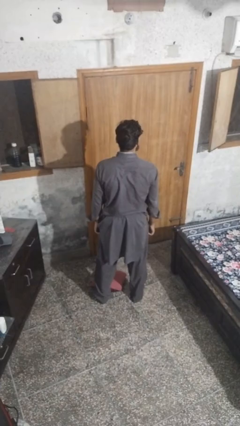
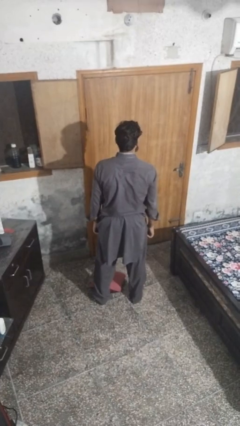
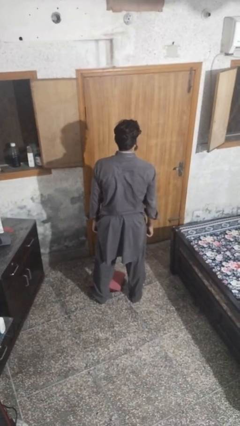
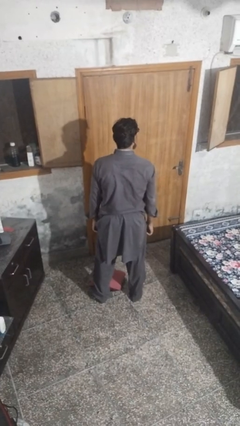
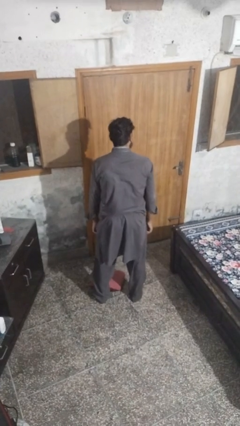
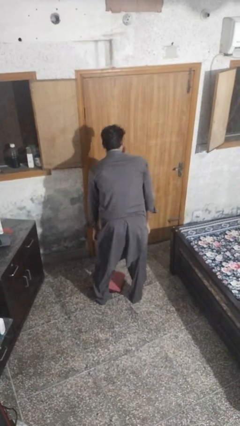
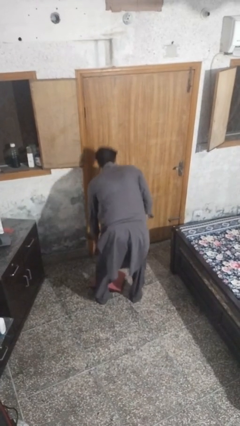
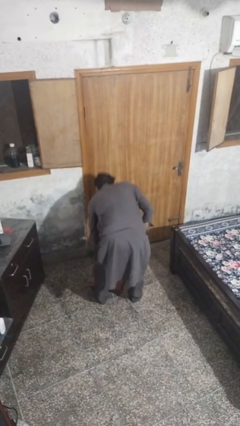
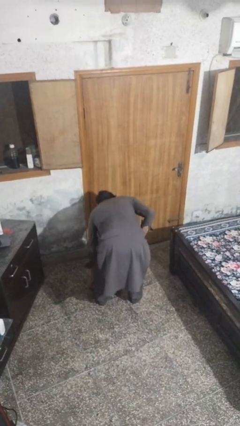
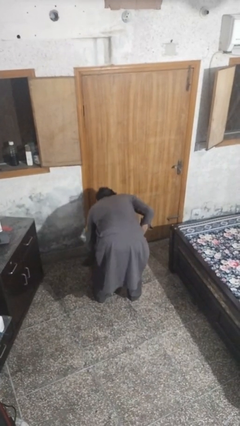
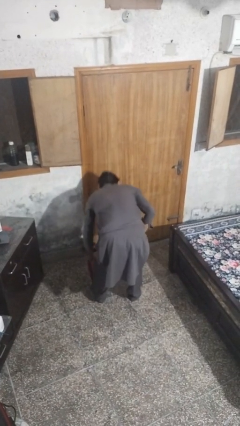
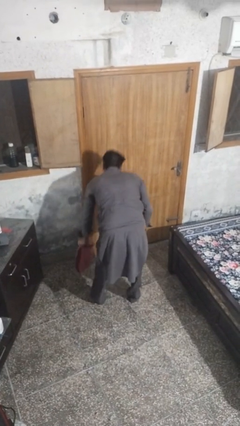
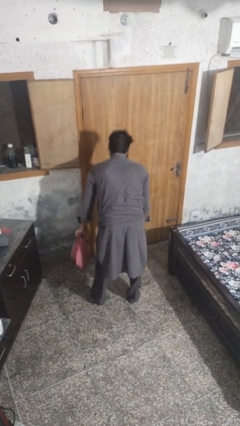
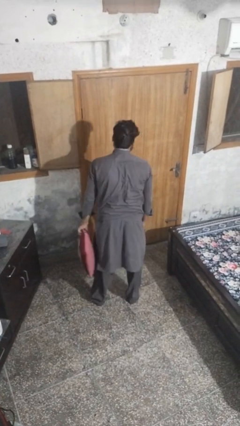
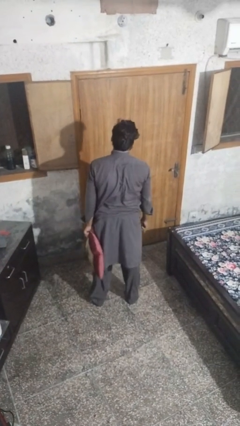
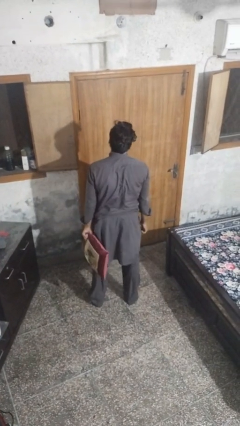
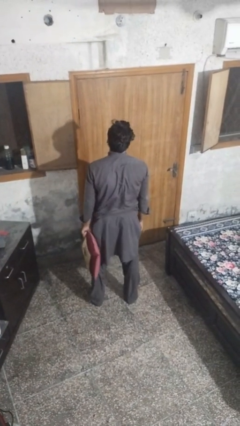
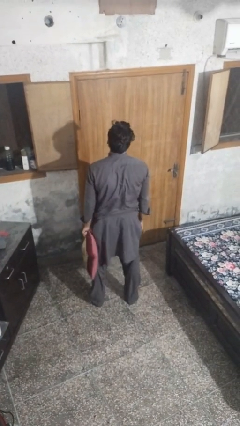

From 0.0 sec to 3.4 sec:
person picks up object from floor

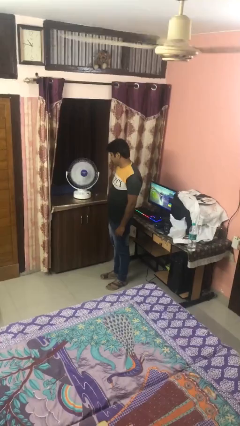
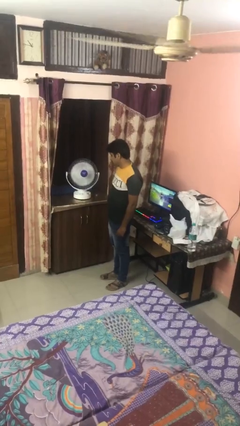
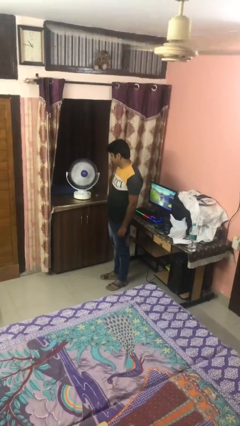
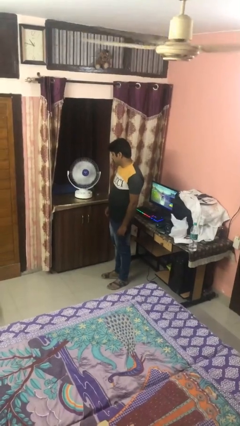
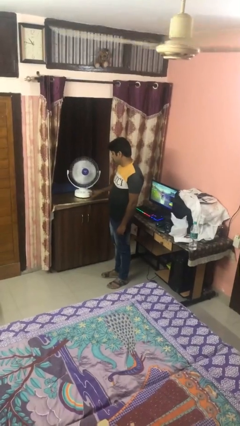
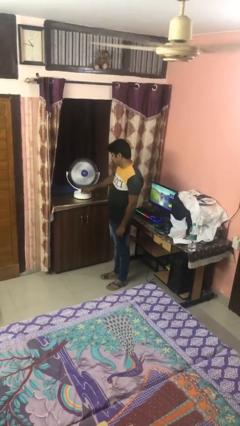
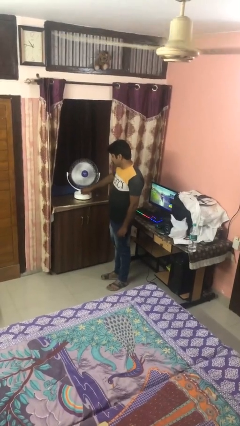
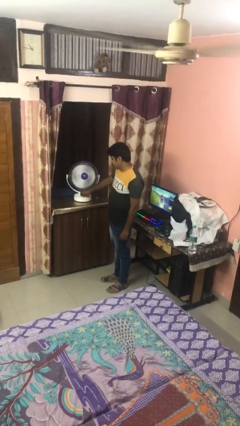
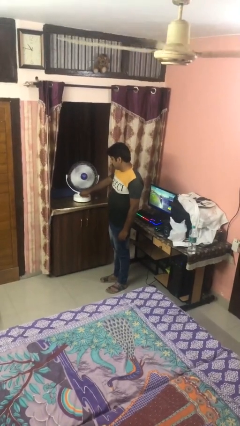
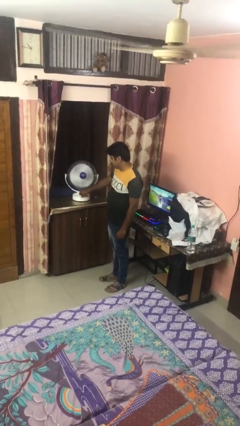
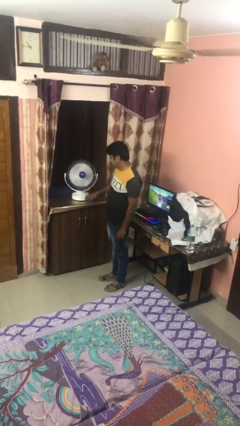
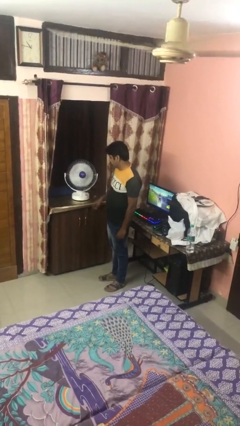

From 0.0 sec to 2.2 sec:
person turns on fan

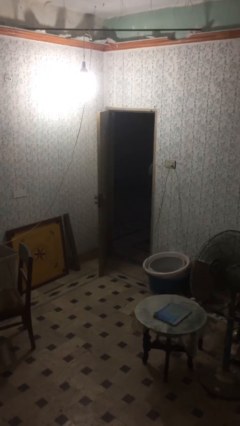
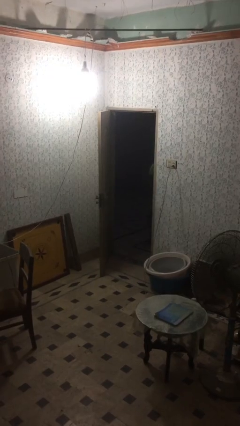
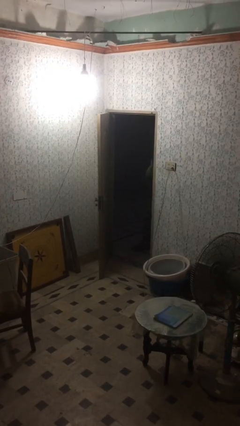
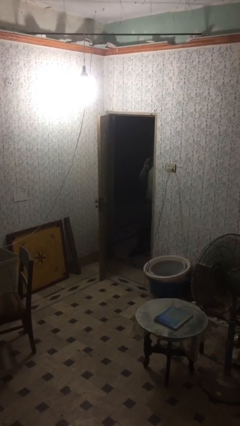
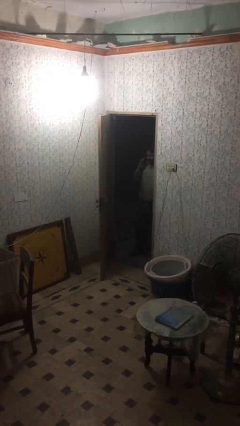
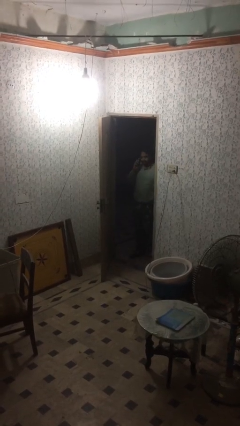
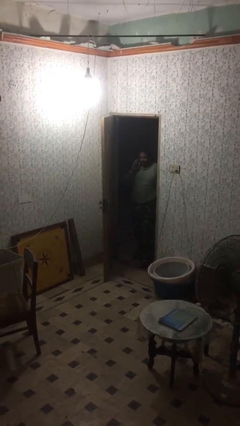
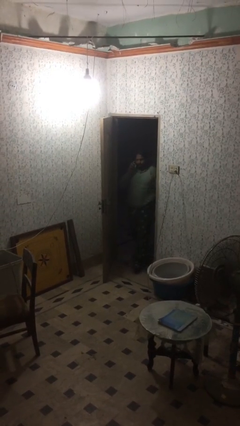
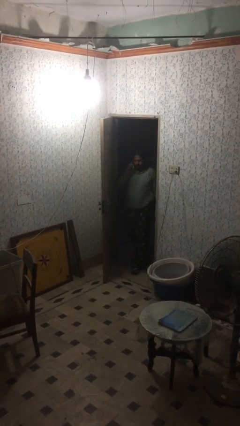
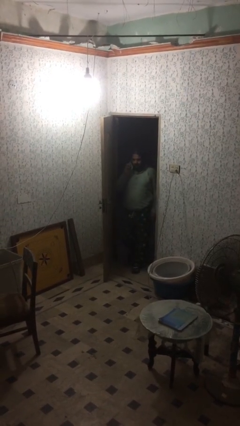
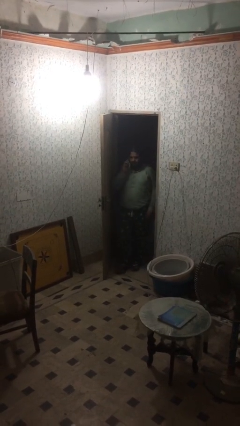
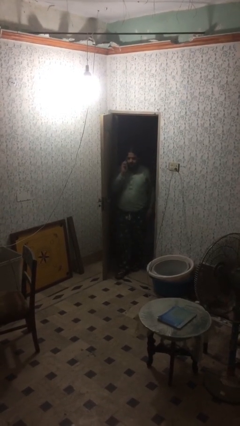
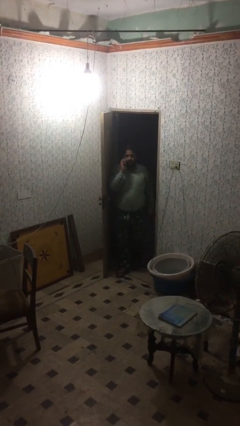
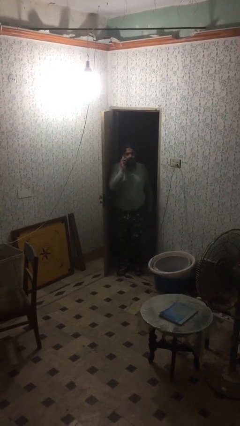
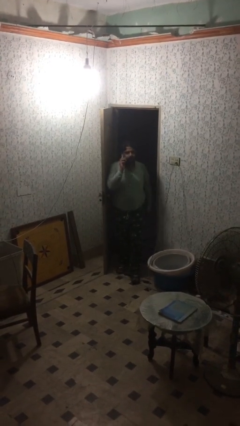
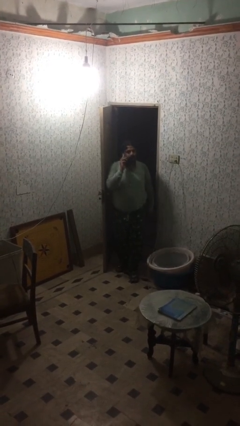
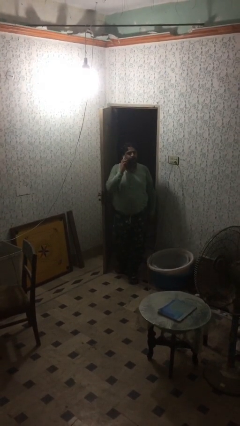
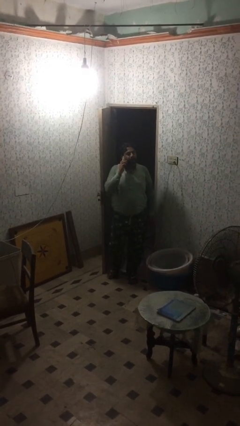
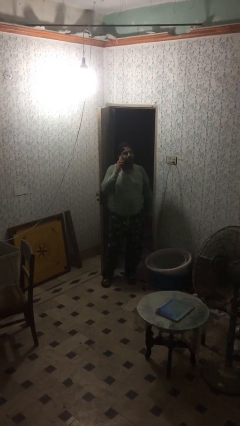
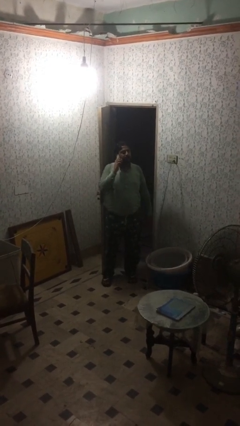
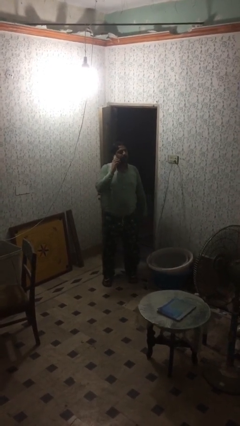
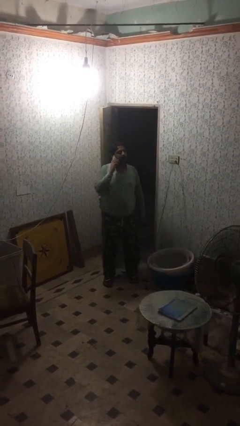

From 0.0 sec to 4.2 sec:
person enters scene through structure

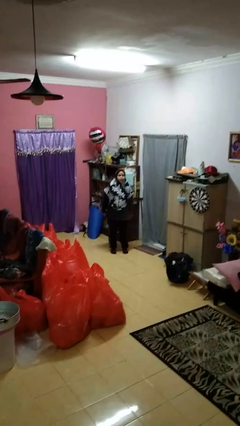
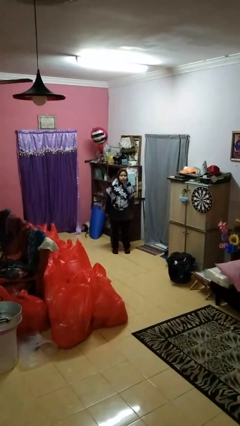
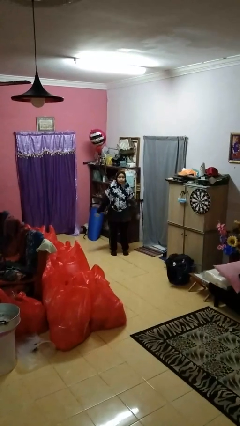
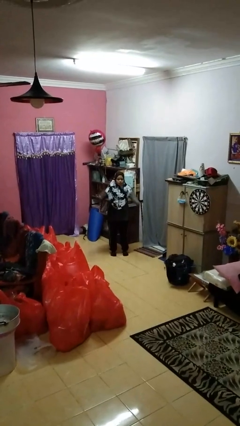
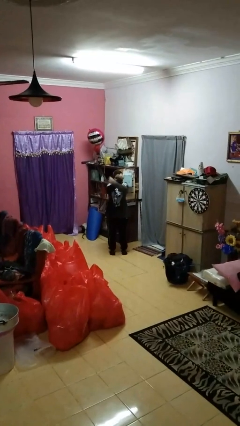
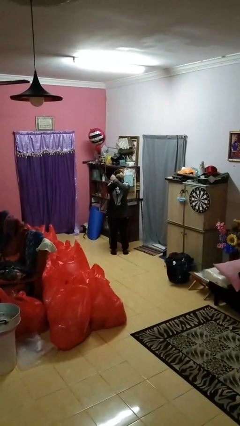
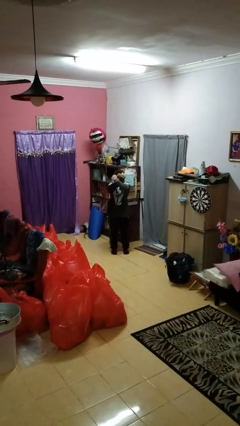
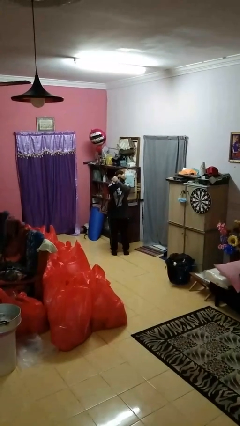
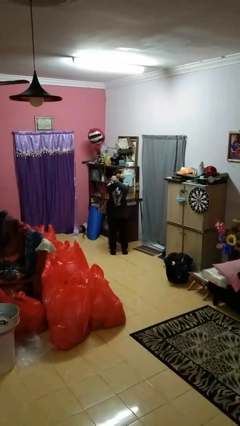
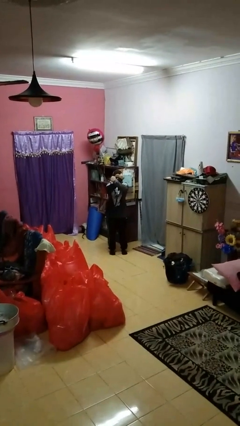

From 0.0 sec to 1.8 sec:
person crosses arms

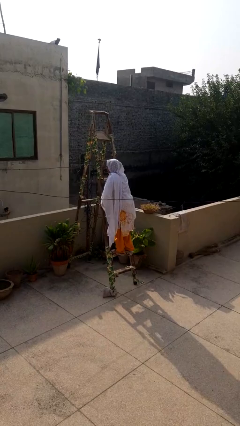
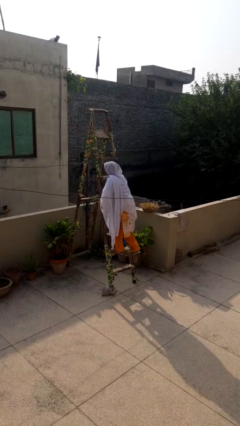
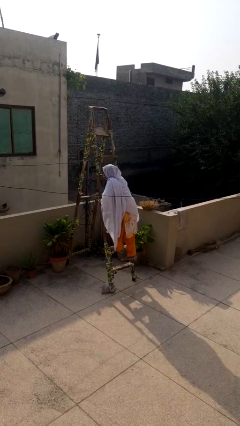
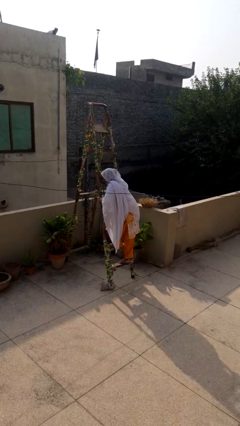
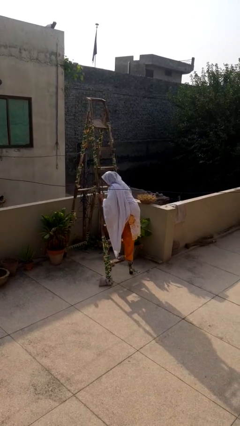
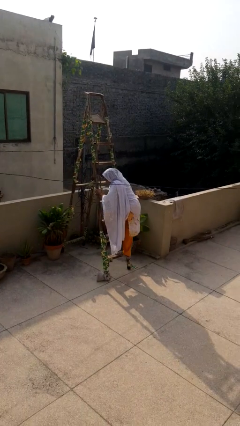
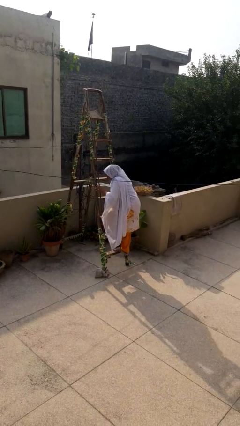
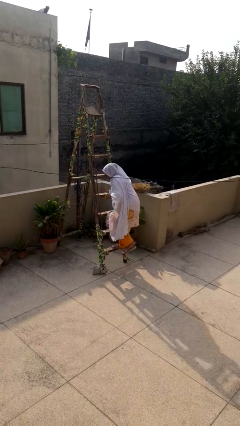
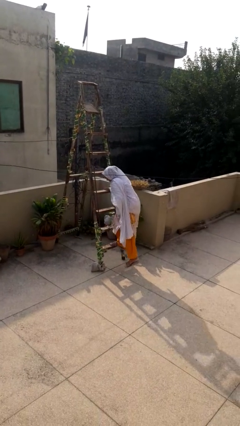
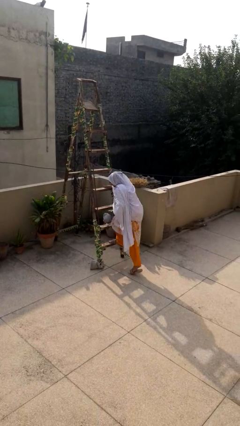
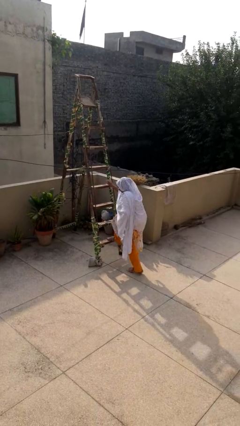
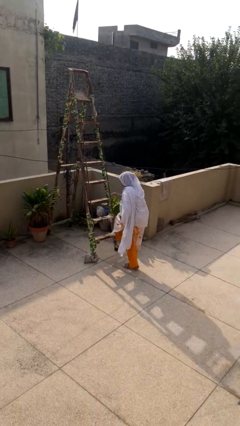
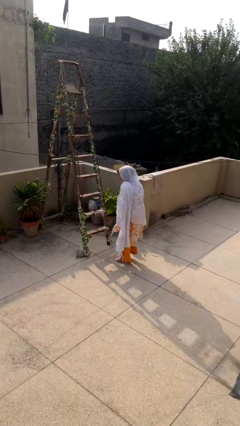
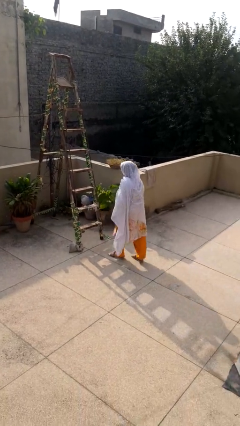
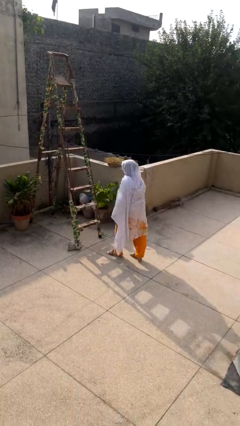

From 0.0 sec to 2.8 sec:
person climbs down ladder

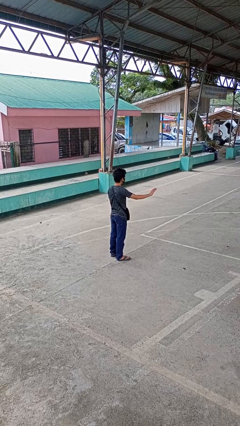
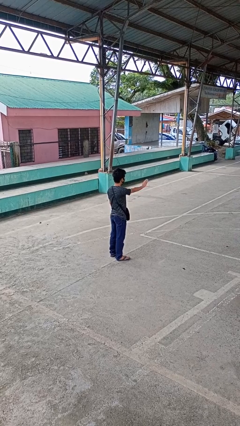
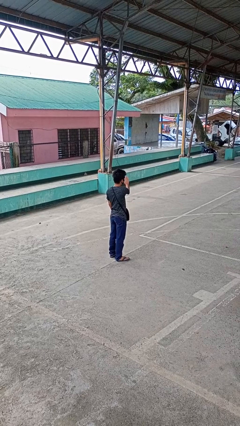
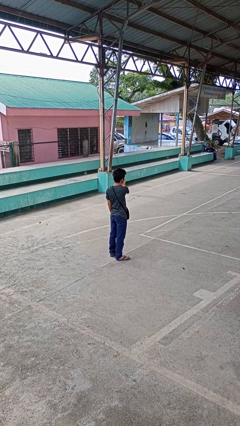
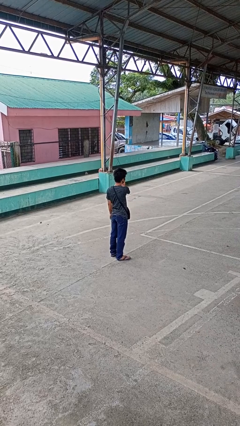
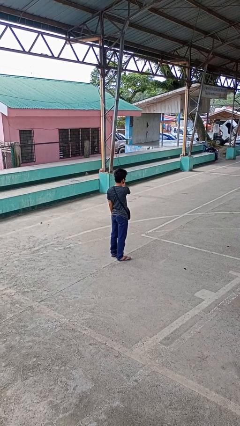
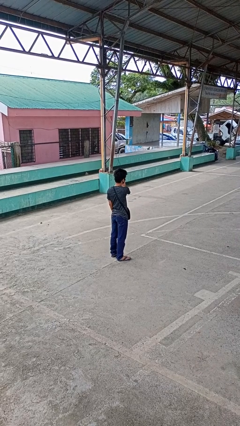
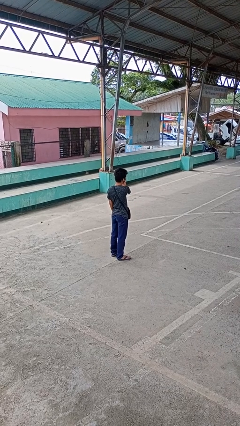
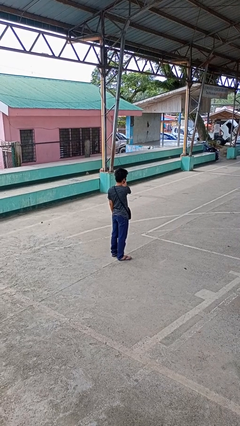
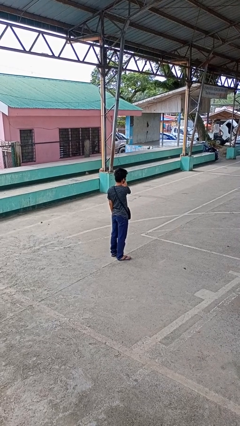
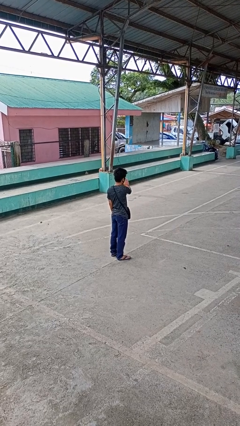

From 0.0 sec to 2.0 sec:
person gestures swipe left

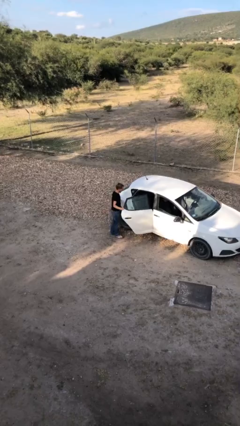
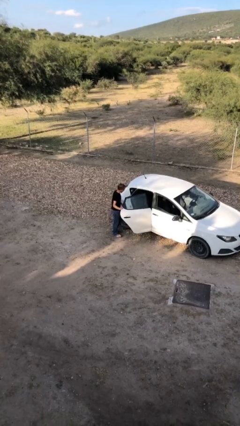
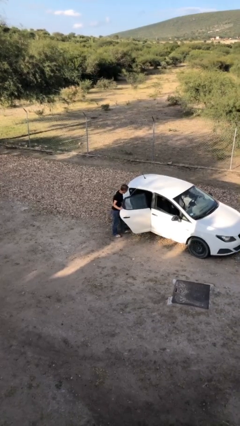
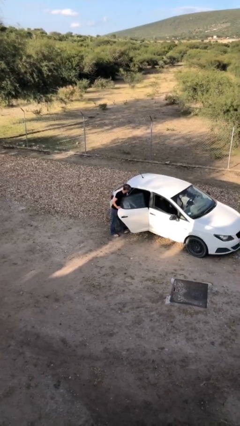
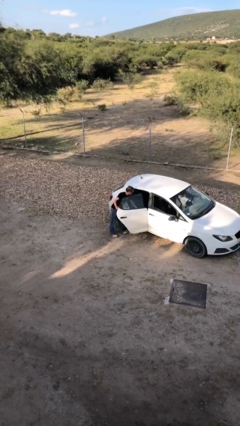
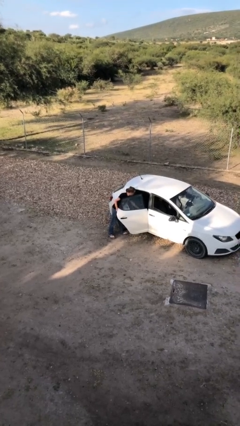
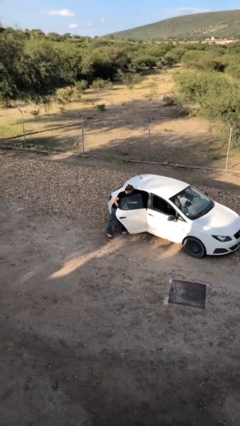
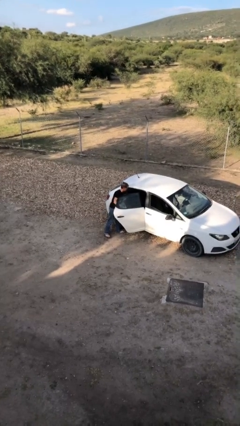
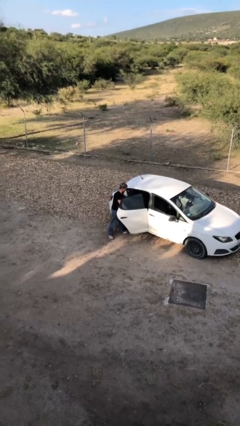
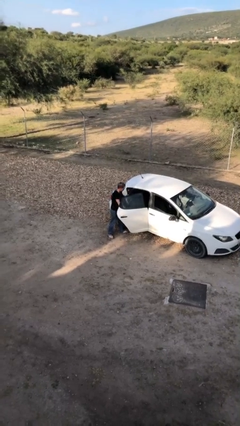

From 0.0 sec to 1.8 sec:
person unloads car
